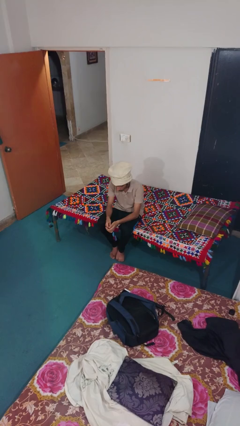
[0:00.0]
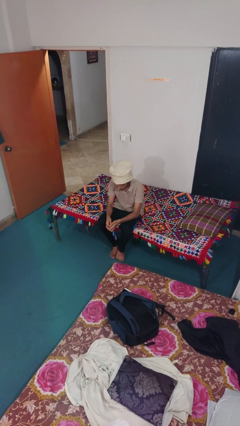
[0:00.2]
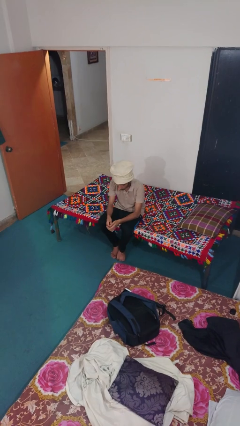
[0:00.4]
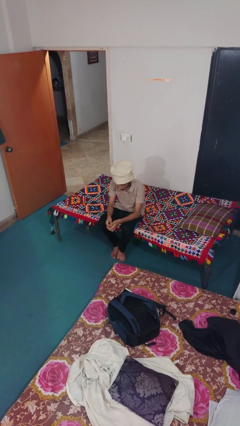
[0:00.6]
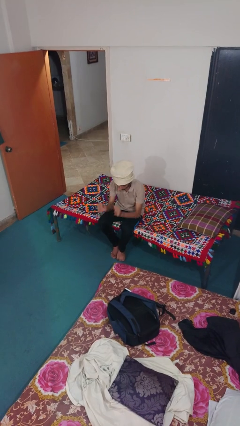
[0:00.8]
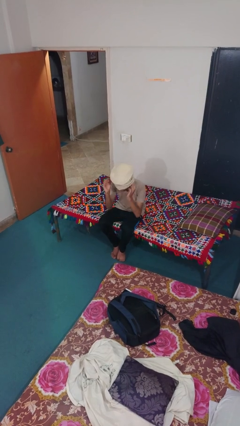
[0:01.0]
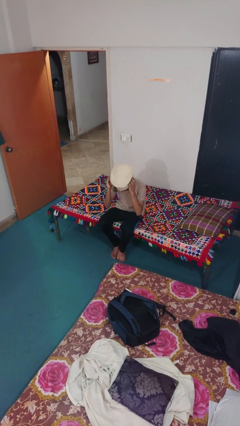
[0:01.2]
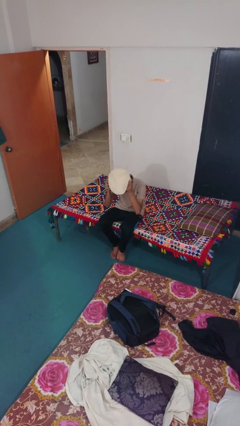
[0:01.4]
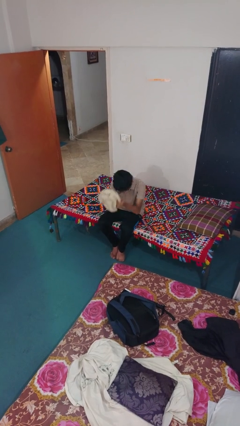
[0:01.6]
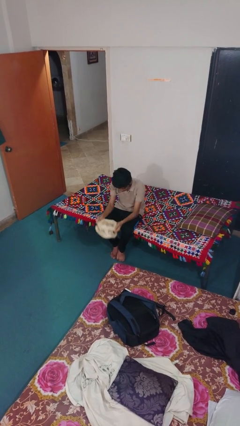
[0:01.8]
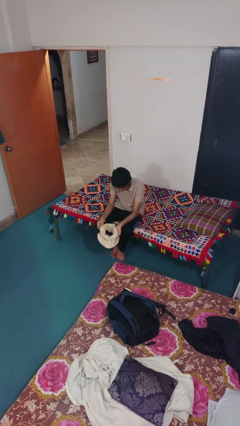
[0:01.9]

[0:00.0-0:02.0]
person takes off hat

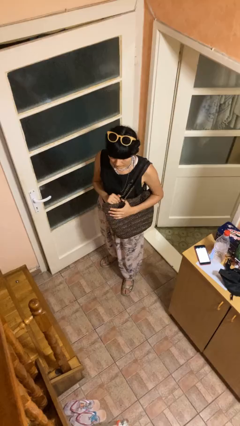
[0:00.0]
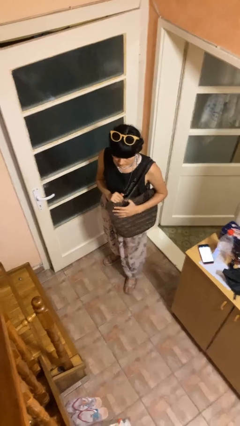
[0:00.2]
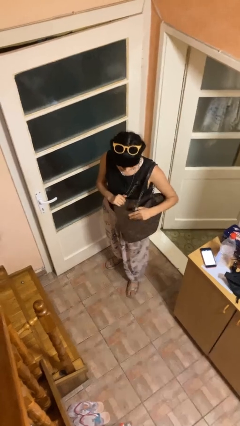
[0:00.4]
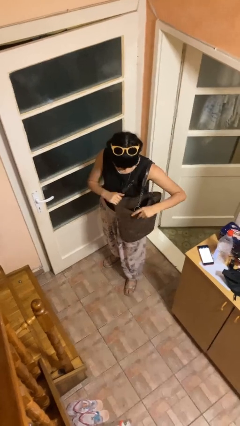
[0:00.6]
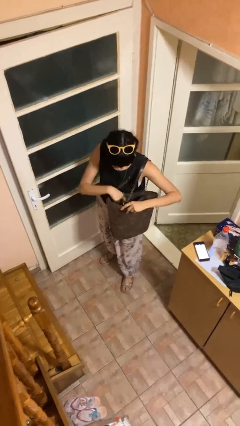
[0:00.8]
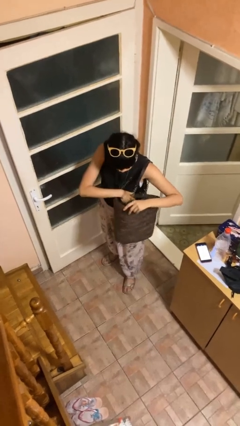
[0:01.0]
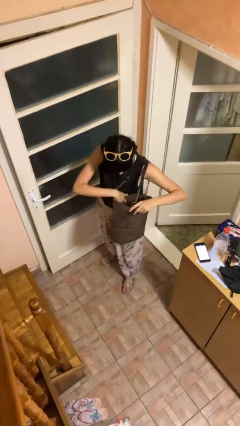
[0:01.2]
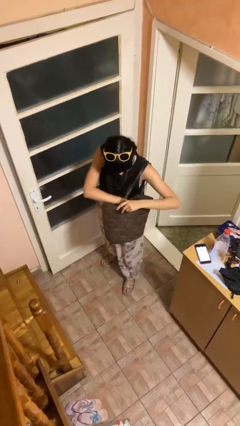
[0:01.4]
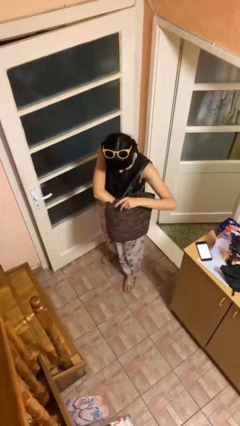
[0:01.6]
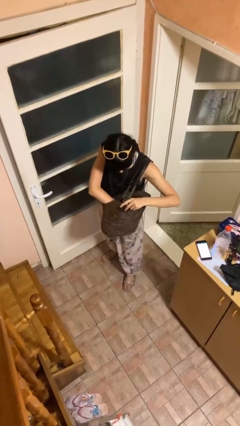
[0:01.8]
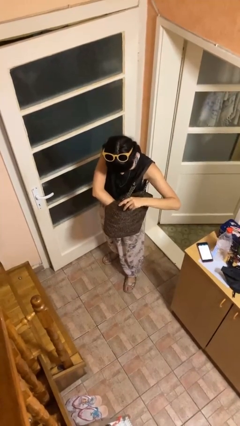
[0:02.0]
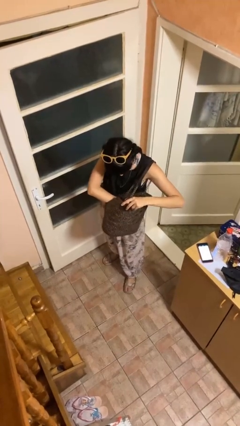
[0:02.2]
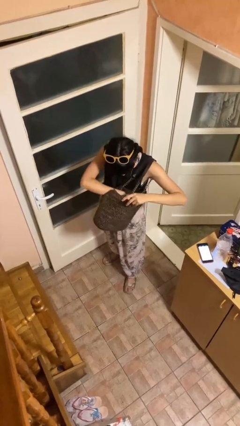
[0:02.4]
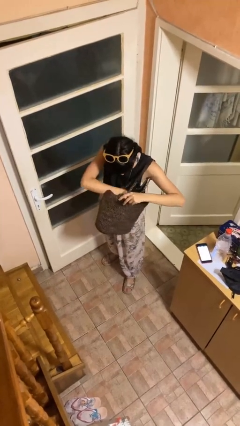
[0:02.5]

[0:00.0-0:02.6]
person searches in purse

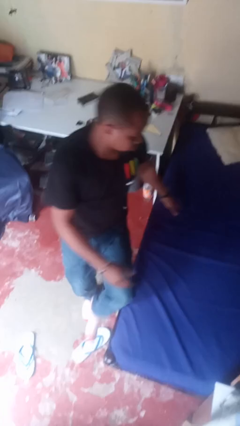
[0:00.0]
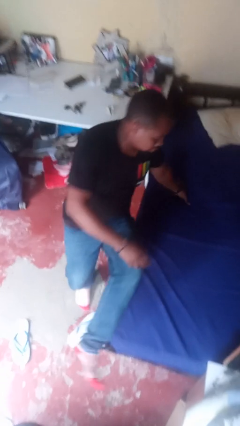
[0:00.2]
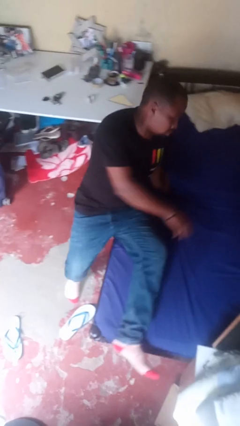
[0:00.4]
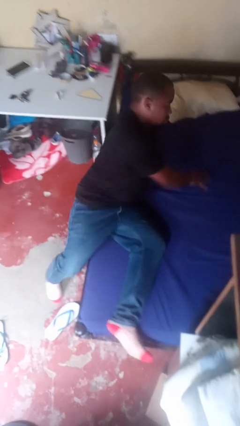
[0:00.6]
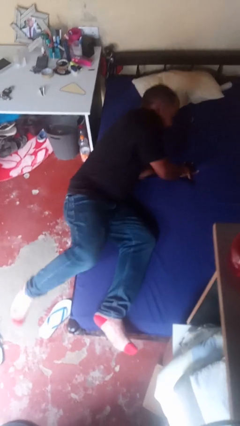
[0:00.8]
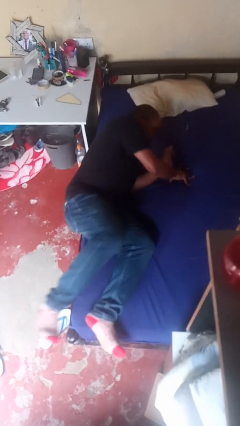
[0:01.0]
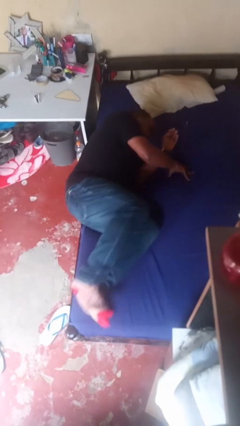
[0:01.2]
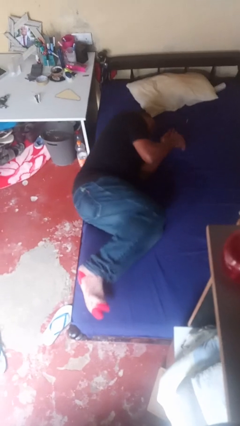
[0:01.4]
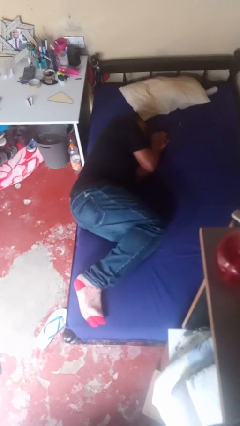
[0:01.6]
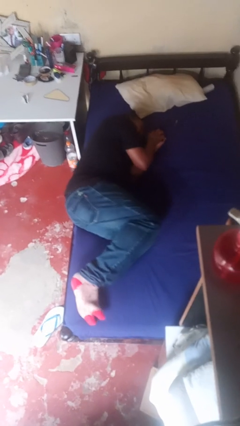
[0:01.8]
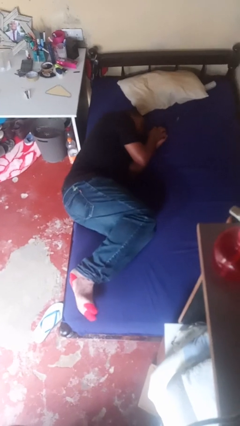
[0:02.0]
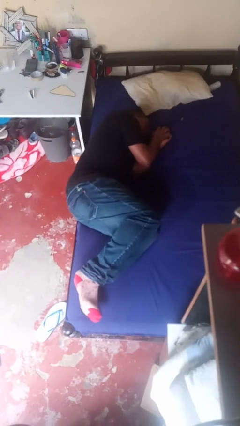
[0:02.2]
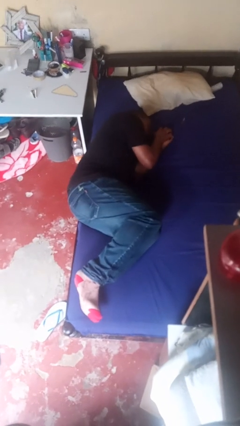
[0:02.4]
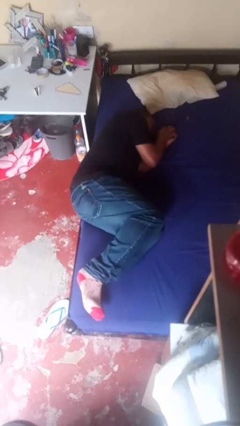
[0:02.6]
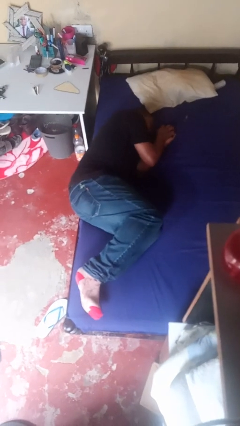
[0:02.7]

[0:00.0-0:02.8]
person lies down on bed

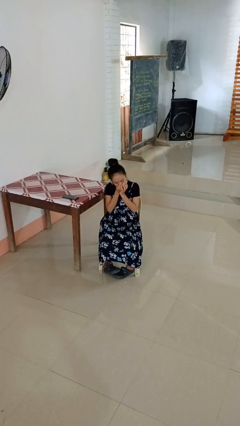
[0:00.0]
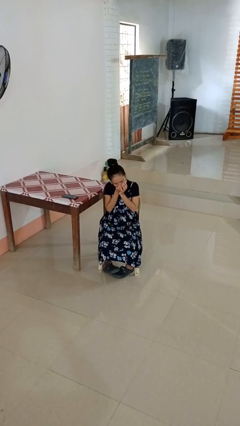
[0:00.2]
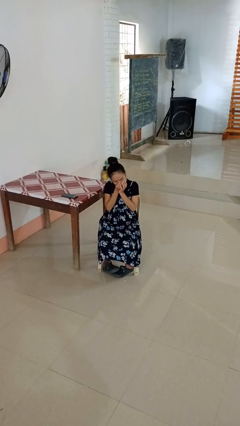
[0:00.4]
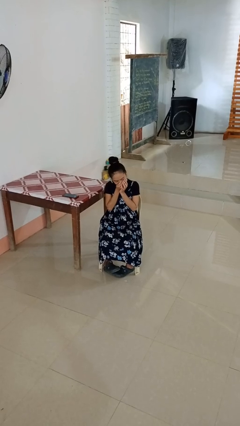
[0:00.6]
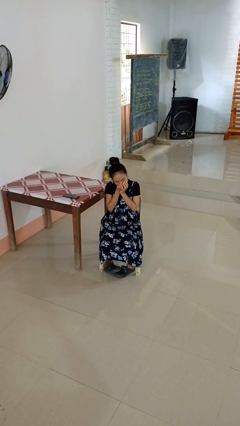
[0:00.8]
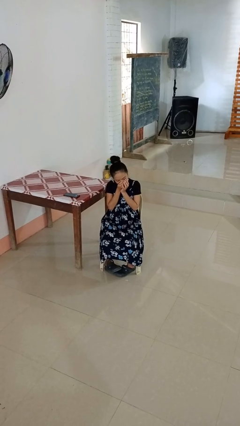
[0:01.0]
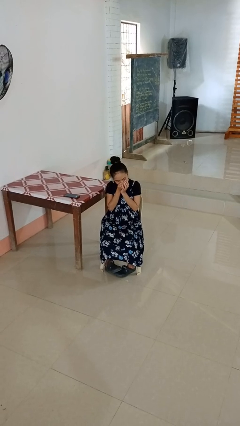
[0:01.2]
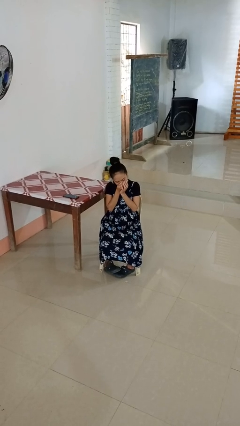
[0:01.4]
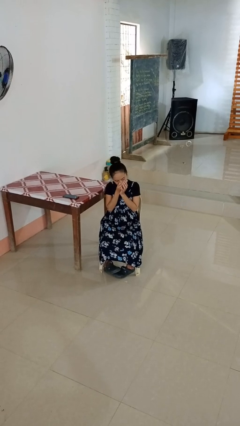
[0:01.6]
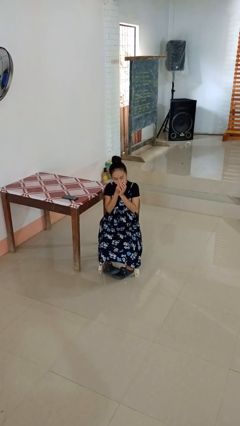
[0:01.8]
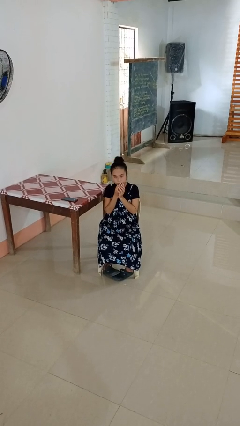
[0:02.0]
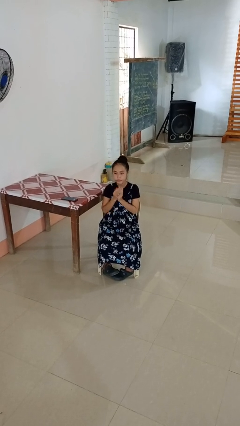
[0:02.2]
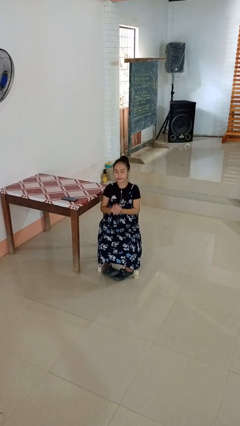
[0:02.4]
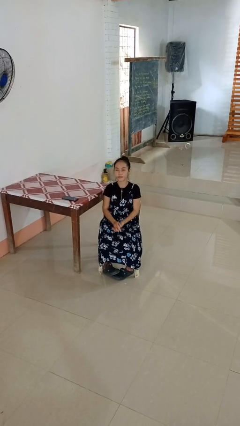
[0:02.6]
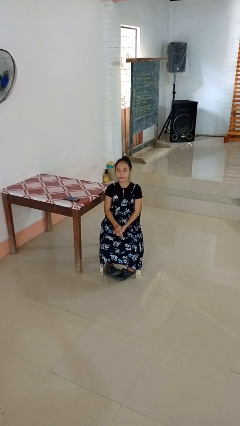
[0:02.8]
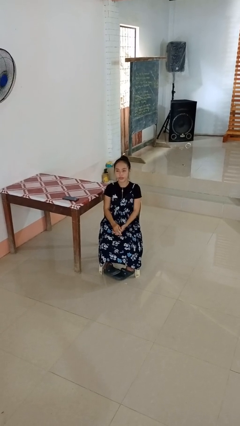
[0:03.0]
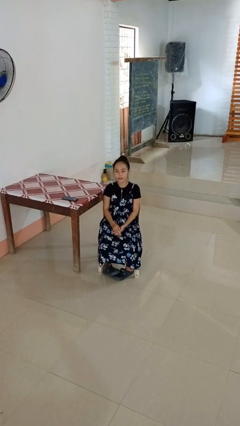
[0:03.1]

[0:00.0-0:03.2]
person sneezes into hand

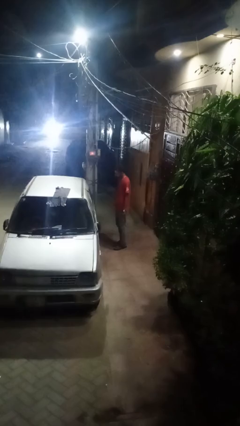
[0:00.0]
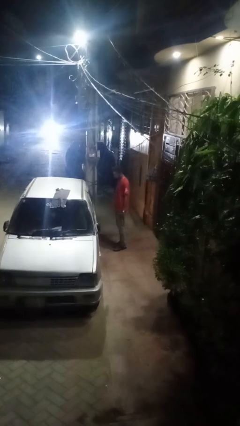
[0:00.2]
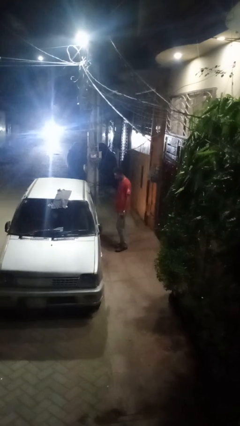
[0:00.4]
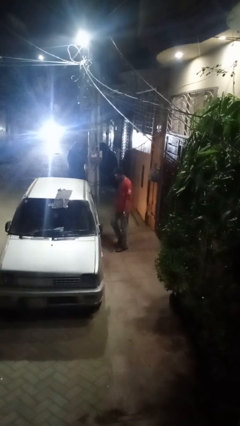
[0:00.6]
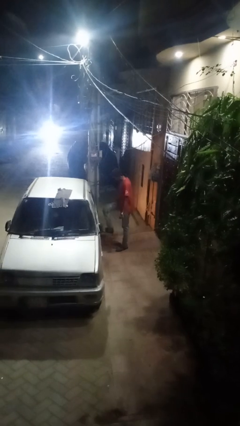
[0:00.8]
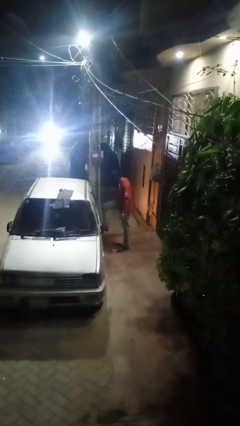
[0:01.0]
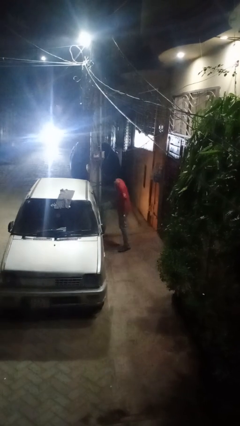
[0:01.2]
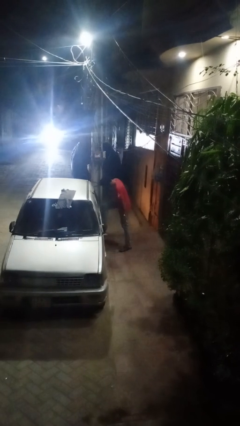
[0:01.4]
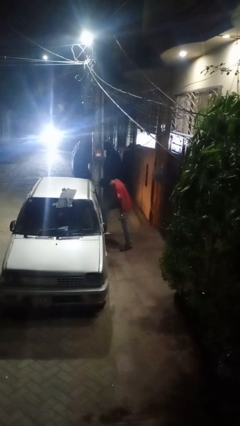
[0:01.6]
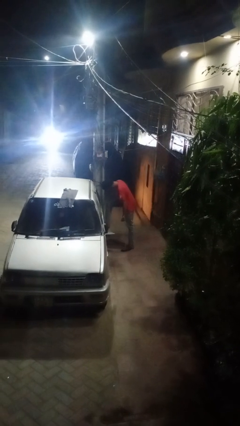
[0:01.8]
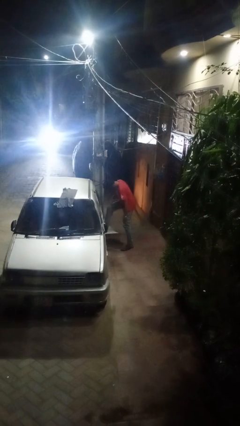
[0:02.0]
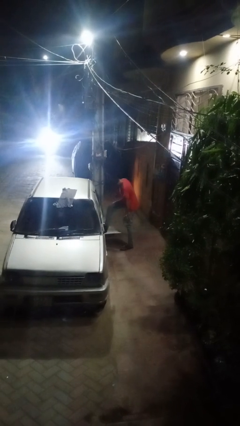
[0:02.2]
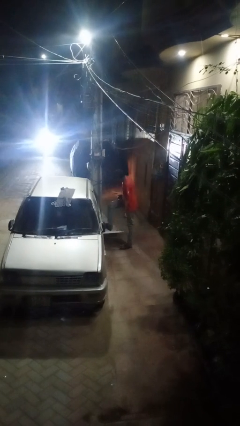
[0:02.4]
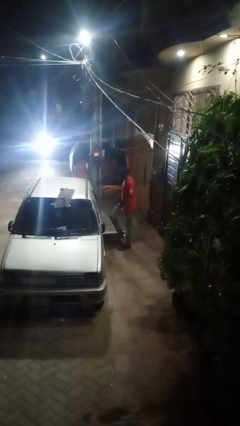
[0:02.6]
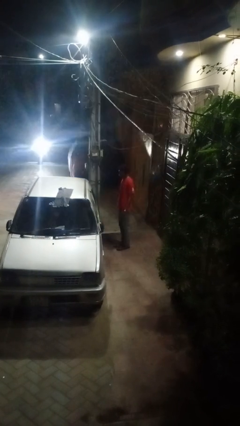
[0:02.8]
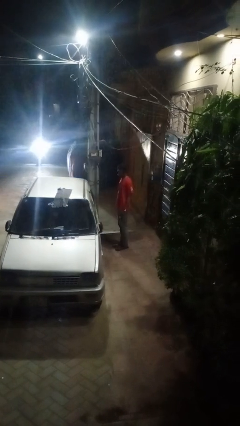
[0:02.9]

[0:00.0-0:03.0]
person kicks car tires

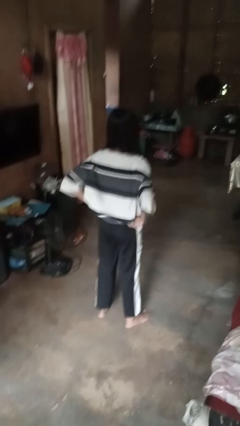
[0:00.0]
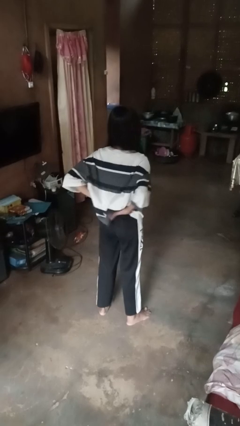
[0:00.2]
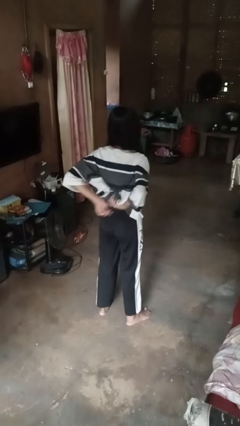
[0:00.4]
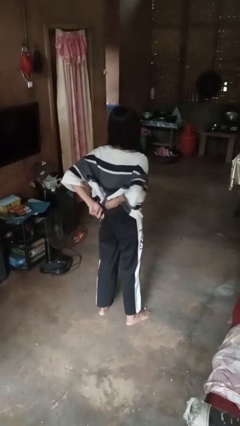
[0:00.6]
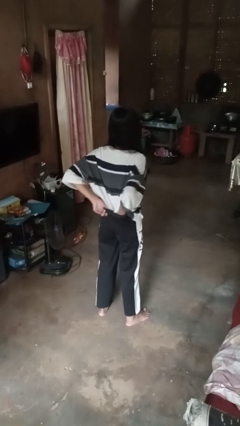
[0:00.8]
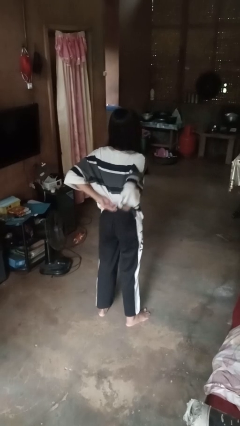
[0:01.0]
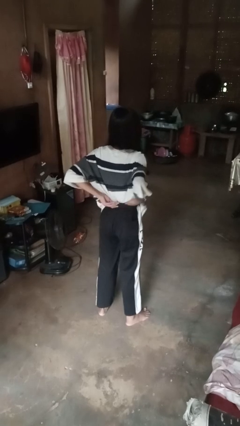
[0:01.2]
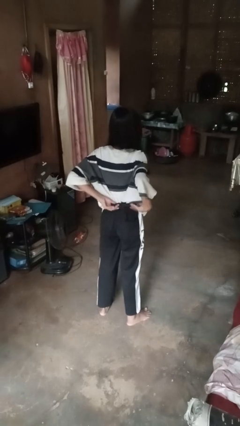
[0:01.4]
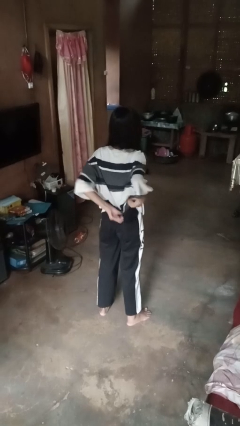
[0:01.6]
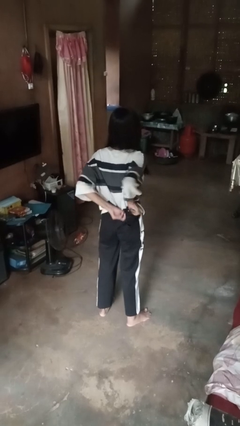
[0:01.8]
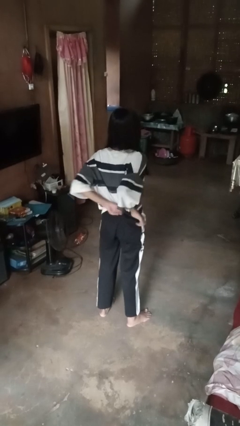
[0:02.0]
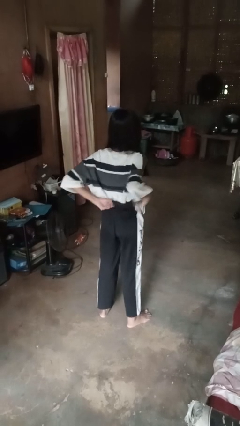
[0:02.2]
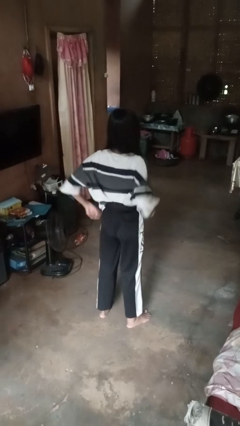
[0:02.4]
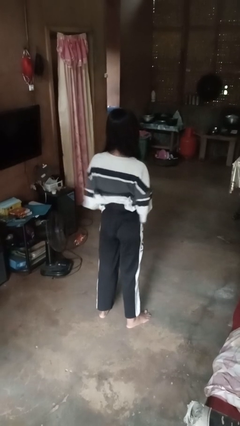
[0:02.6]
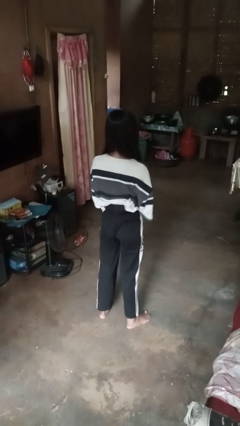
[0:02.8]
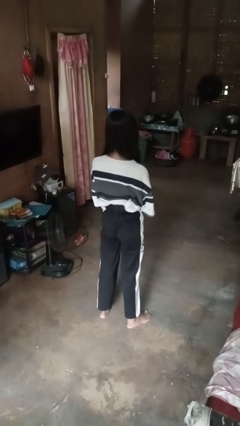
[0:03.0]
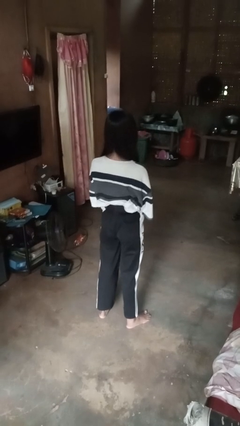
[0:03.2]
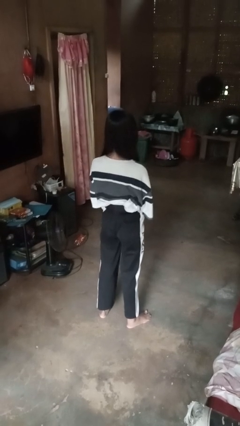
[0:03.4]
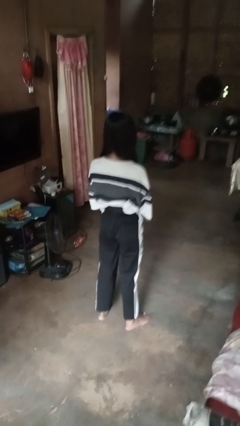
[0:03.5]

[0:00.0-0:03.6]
person tucks in shirt
